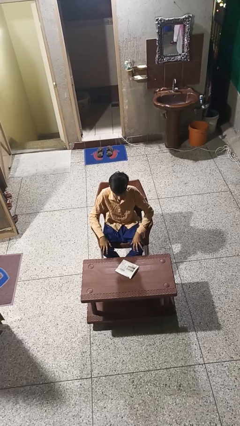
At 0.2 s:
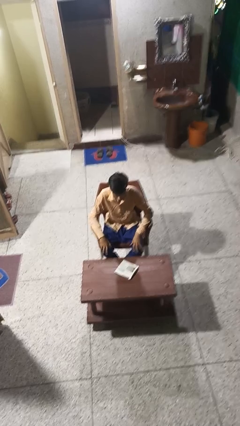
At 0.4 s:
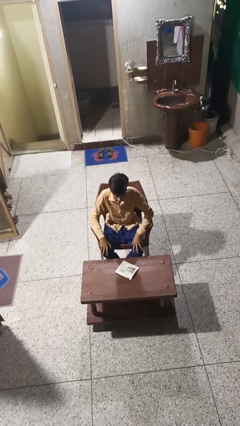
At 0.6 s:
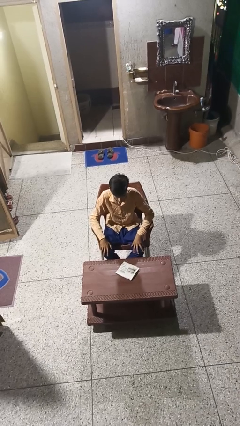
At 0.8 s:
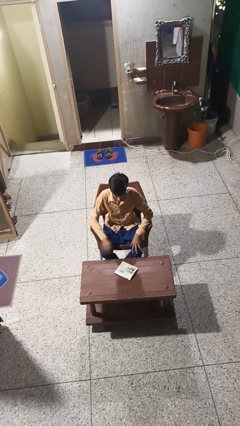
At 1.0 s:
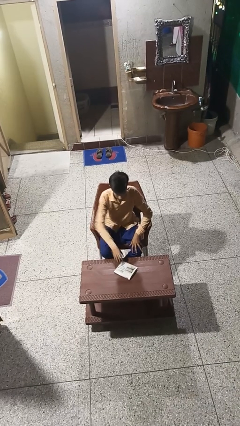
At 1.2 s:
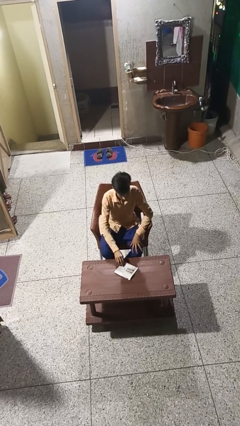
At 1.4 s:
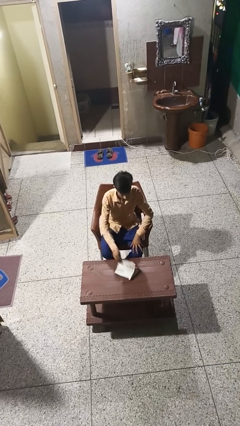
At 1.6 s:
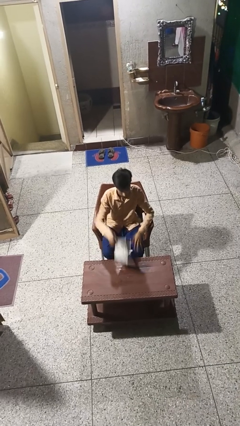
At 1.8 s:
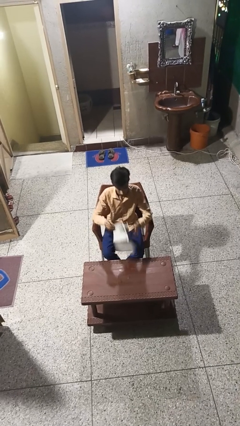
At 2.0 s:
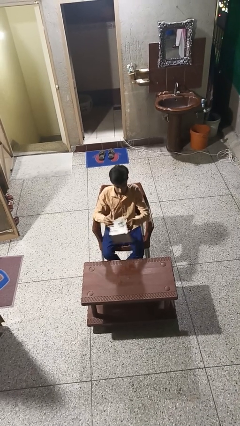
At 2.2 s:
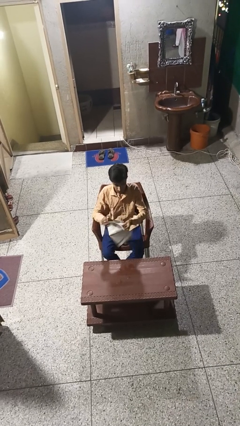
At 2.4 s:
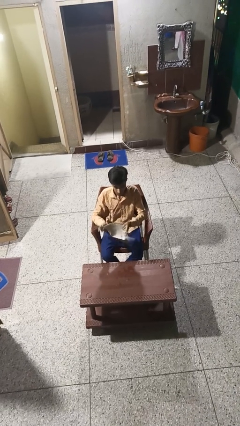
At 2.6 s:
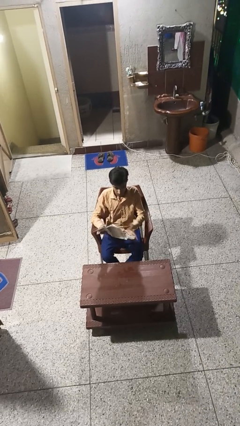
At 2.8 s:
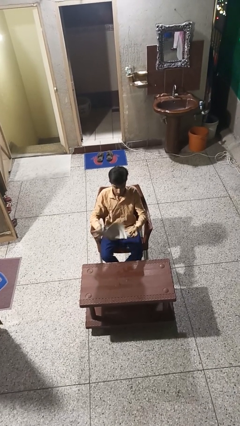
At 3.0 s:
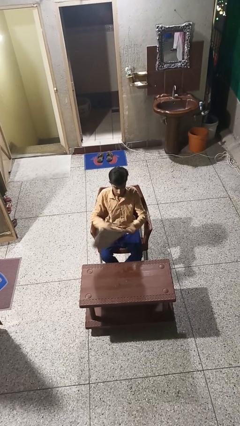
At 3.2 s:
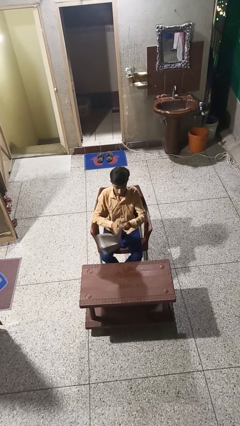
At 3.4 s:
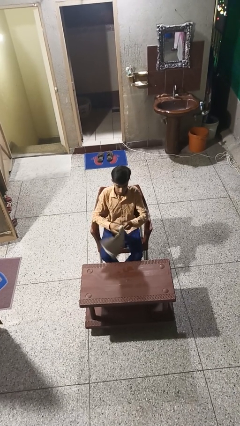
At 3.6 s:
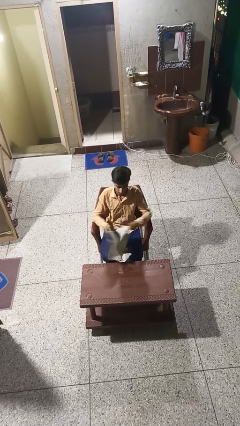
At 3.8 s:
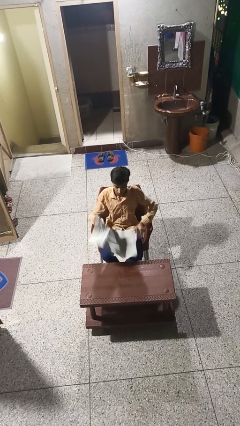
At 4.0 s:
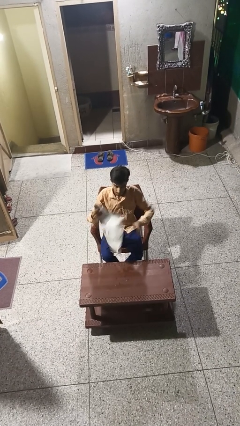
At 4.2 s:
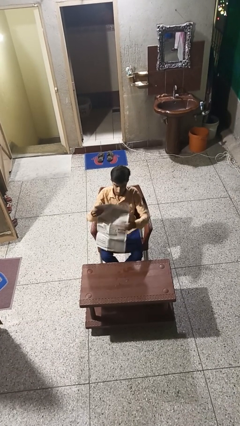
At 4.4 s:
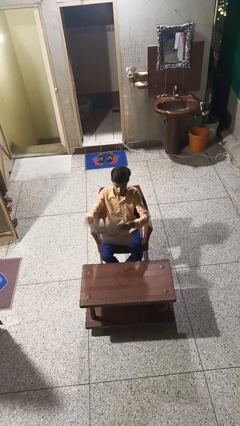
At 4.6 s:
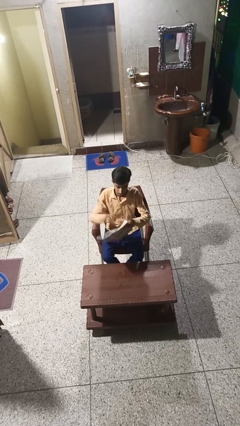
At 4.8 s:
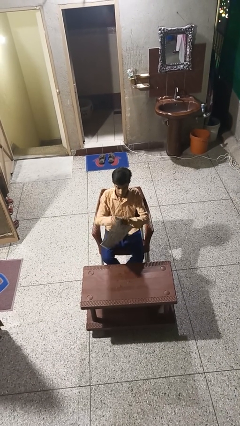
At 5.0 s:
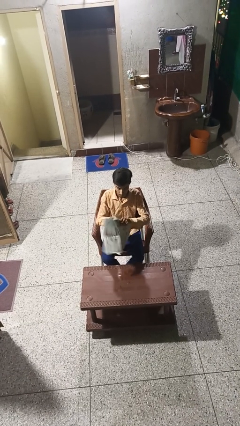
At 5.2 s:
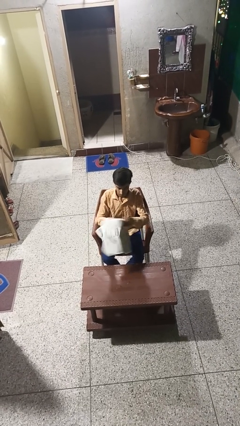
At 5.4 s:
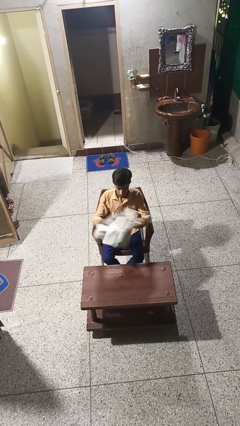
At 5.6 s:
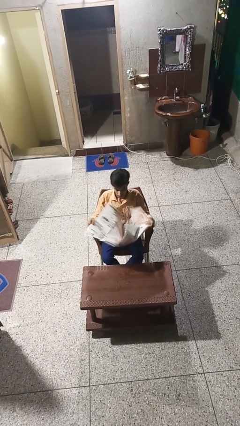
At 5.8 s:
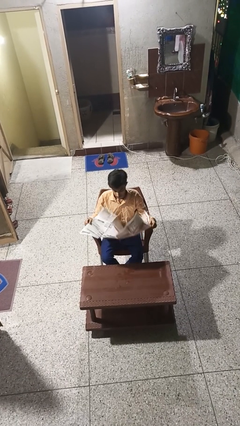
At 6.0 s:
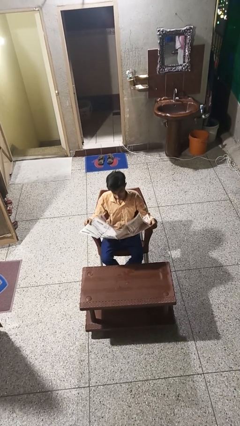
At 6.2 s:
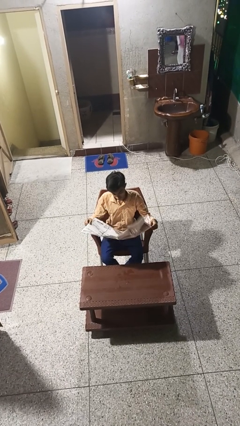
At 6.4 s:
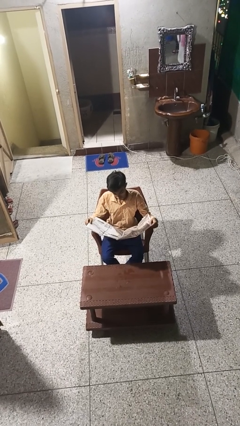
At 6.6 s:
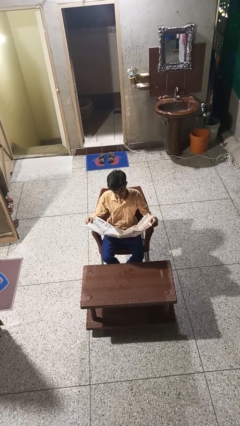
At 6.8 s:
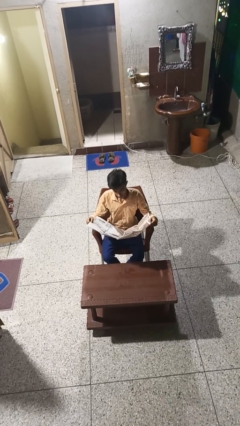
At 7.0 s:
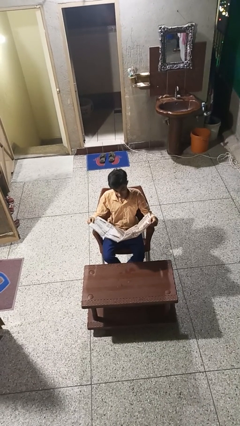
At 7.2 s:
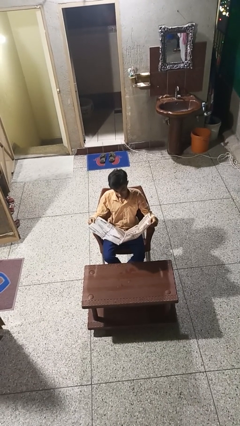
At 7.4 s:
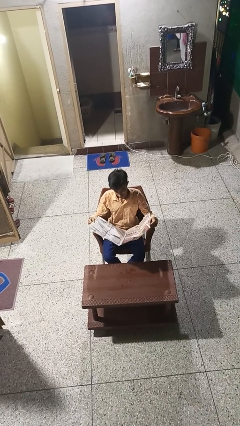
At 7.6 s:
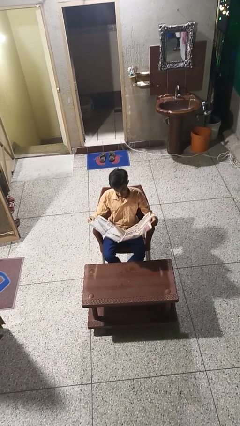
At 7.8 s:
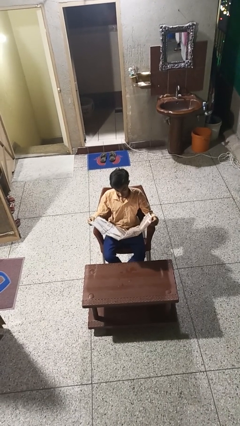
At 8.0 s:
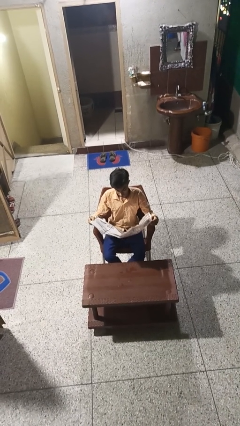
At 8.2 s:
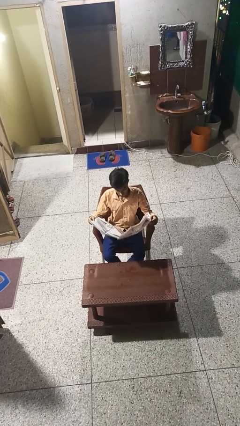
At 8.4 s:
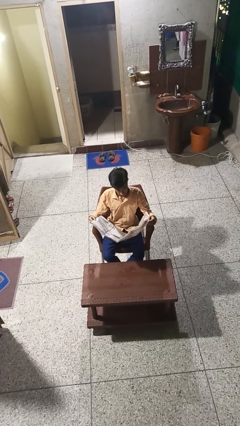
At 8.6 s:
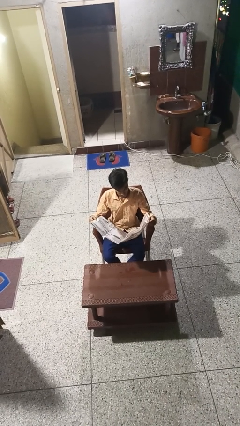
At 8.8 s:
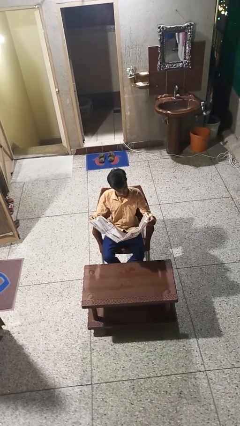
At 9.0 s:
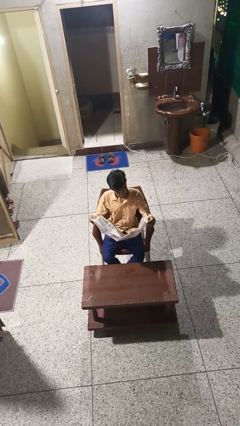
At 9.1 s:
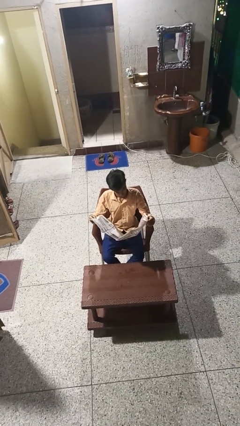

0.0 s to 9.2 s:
person reads newspaper

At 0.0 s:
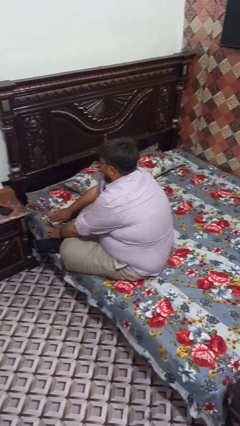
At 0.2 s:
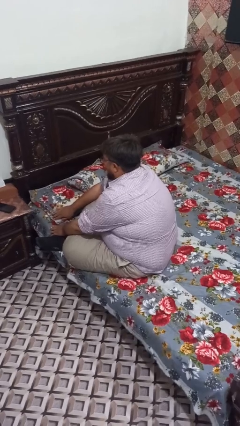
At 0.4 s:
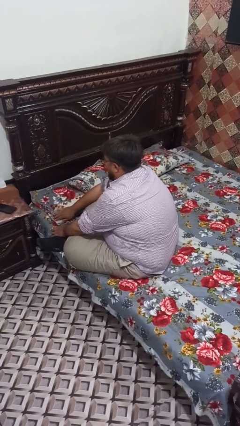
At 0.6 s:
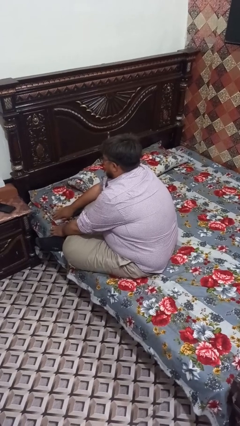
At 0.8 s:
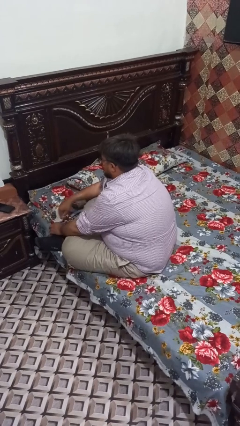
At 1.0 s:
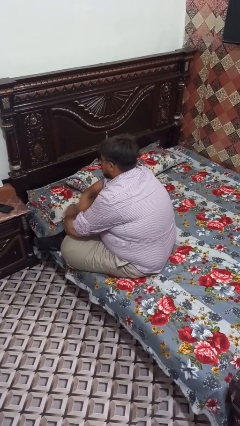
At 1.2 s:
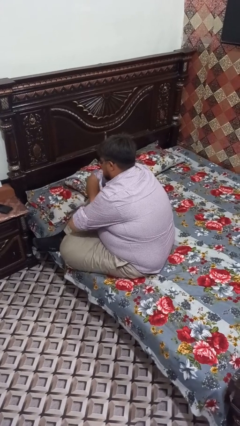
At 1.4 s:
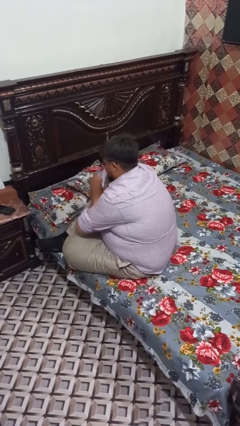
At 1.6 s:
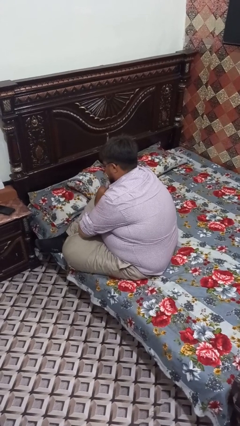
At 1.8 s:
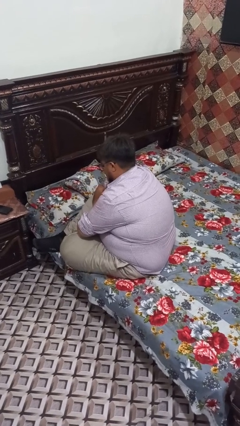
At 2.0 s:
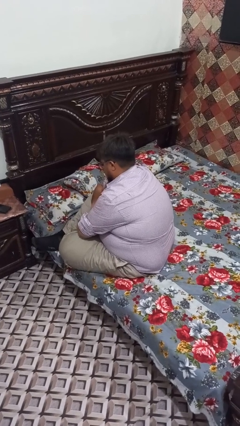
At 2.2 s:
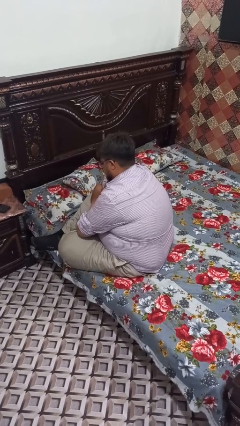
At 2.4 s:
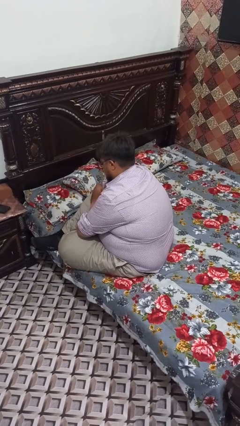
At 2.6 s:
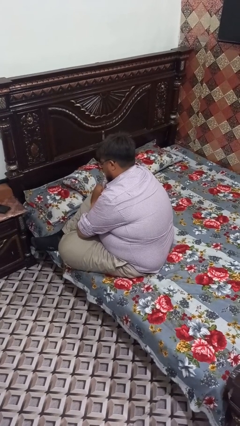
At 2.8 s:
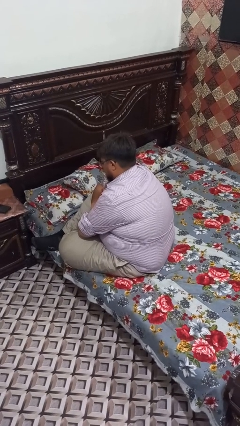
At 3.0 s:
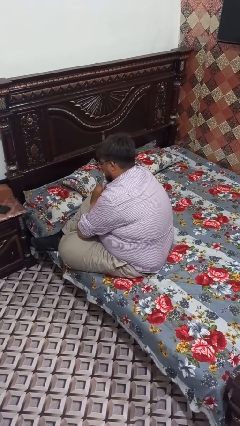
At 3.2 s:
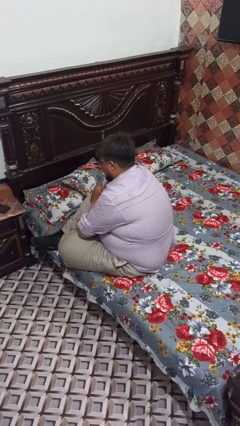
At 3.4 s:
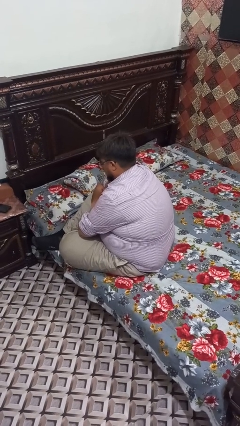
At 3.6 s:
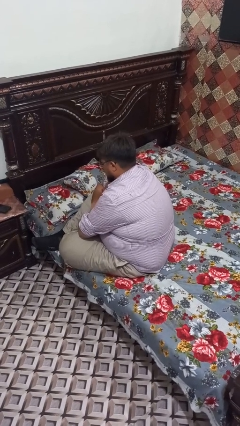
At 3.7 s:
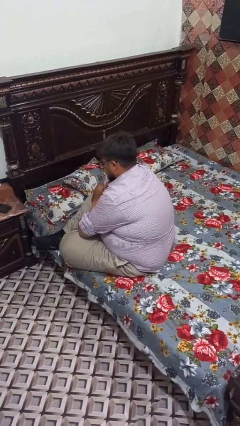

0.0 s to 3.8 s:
person crosses arms

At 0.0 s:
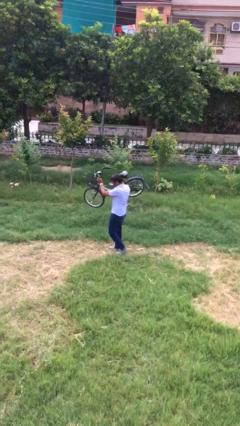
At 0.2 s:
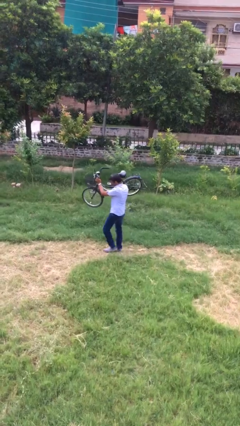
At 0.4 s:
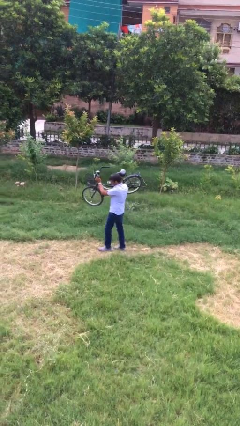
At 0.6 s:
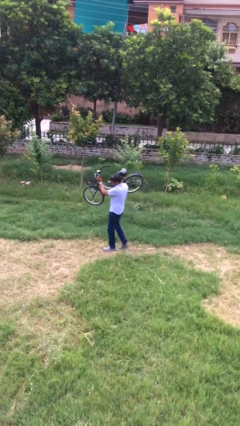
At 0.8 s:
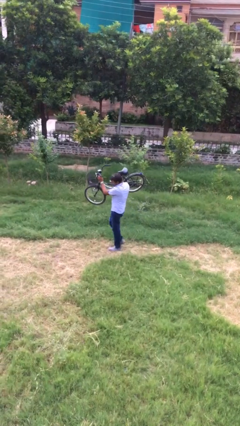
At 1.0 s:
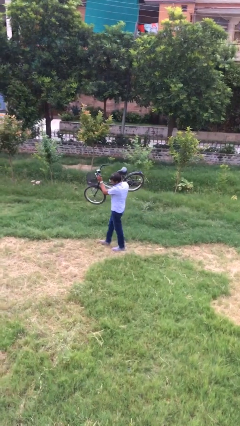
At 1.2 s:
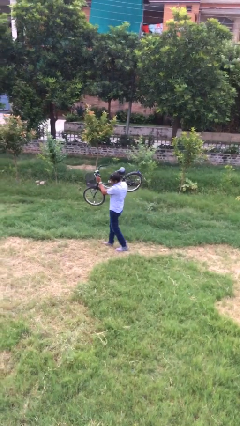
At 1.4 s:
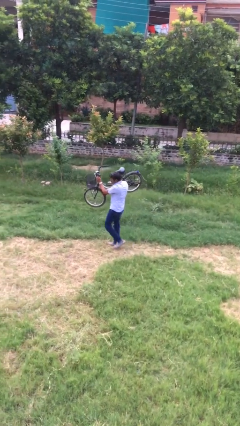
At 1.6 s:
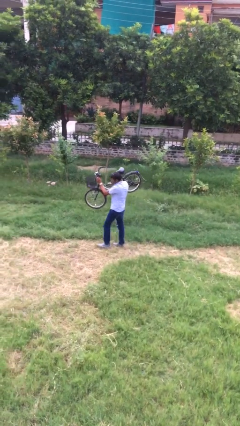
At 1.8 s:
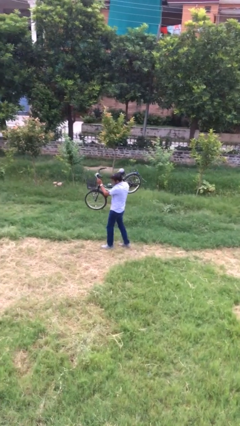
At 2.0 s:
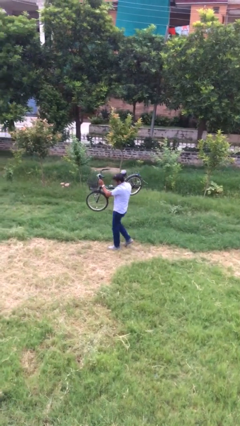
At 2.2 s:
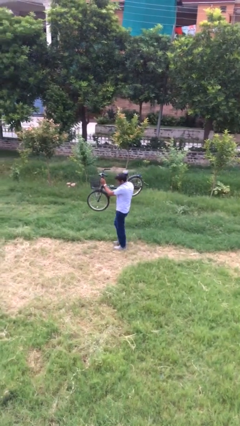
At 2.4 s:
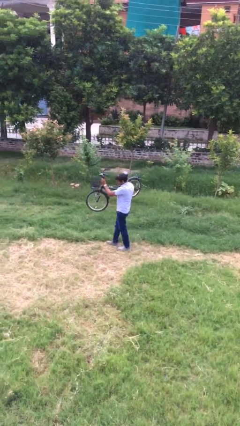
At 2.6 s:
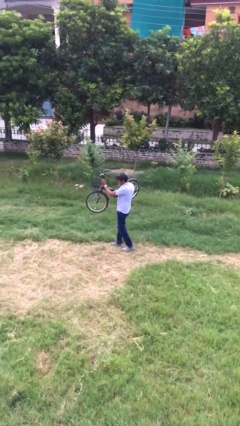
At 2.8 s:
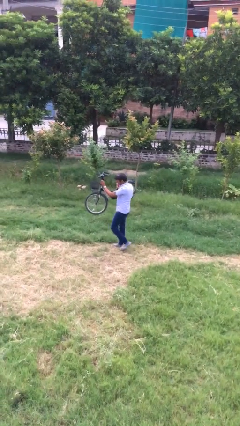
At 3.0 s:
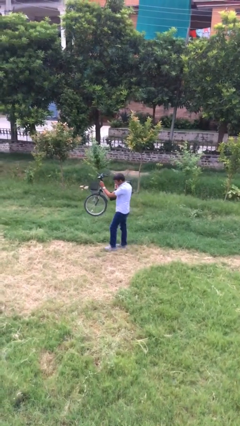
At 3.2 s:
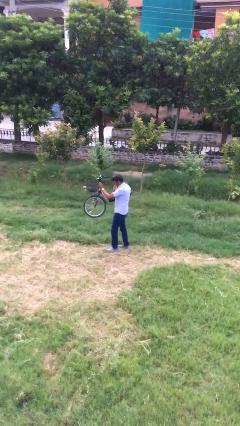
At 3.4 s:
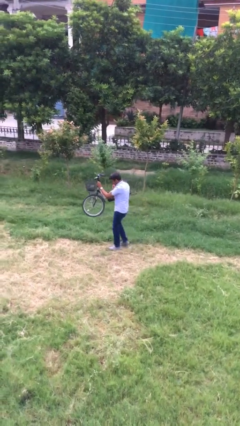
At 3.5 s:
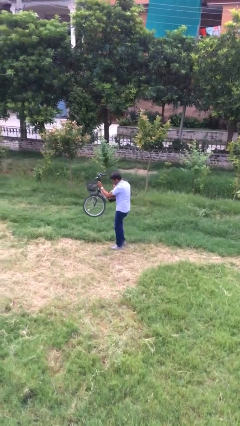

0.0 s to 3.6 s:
person carries heavy object

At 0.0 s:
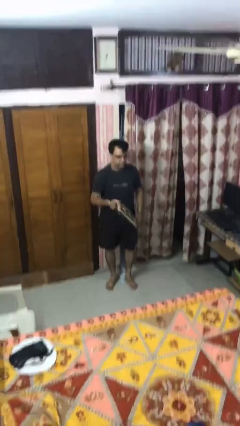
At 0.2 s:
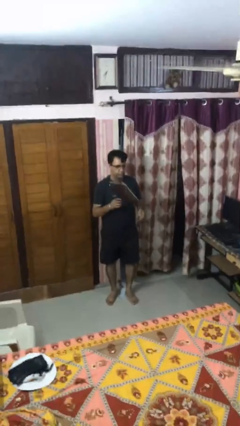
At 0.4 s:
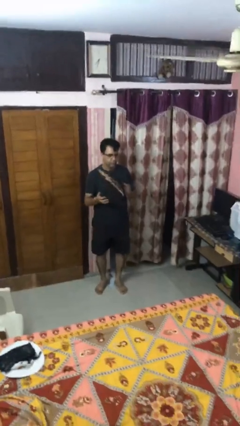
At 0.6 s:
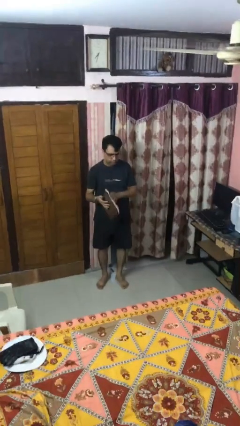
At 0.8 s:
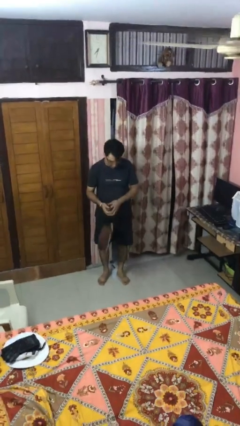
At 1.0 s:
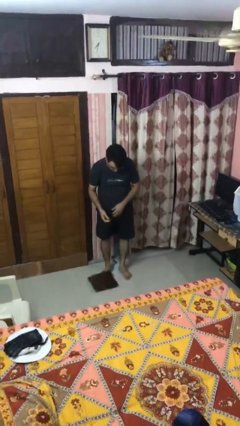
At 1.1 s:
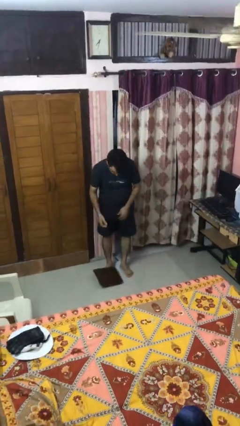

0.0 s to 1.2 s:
person drops object
